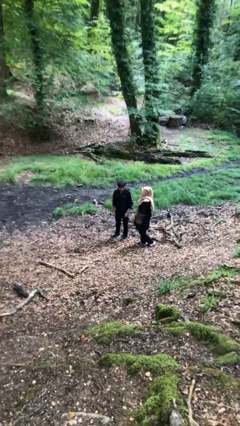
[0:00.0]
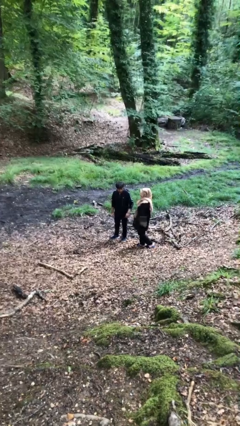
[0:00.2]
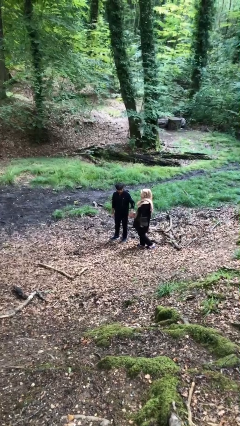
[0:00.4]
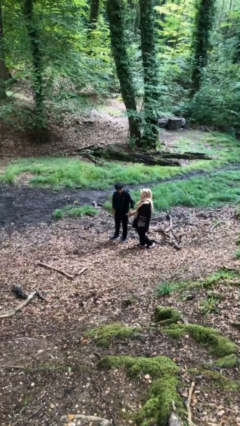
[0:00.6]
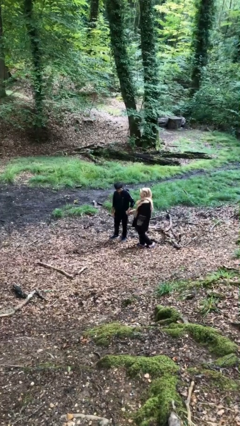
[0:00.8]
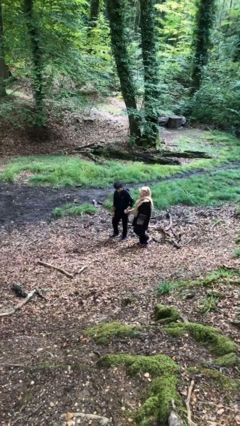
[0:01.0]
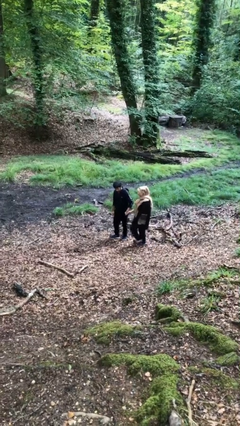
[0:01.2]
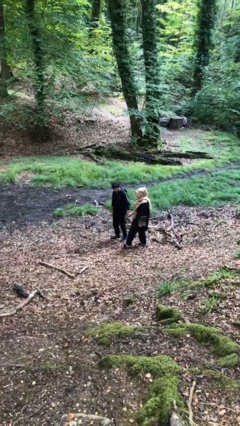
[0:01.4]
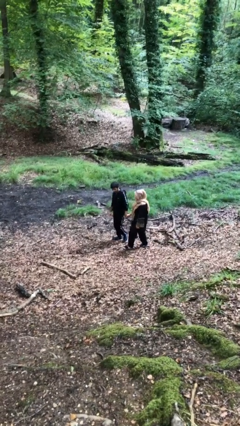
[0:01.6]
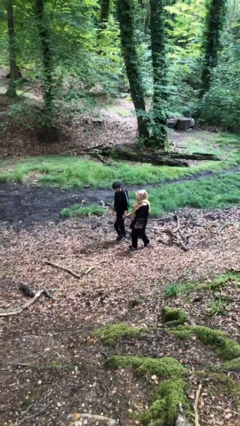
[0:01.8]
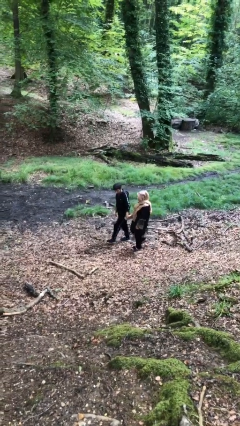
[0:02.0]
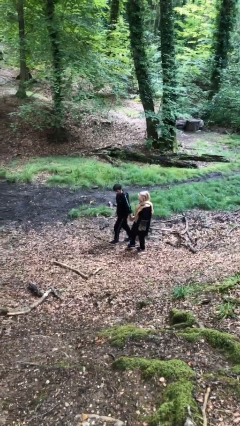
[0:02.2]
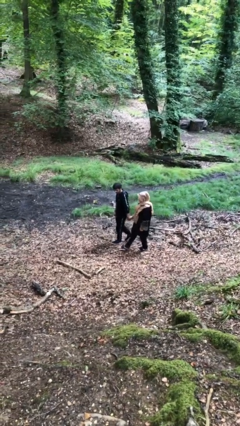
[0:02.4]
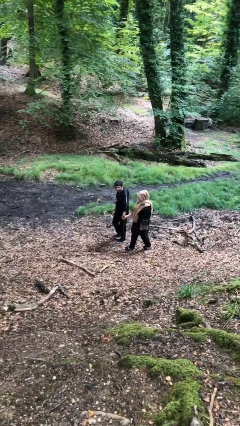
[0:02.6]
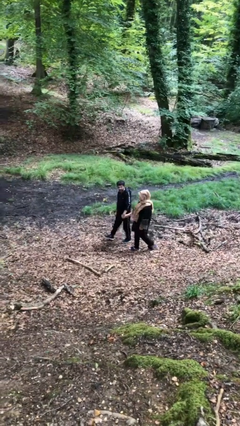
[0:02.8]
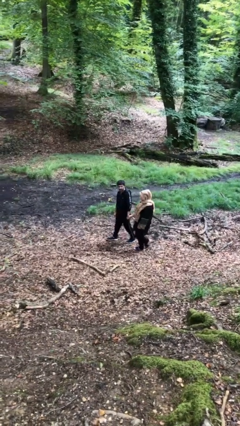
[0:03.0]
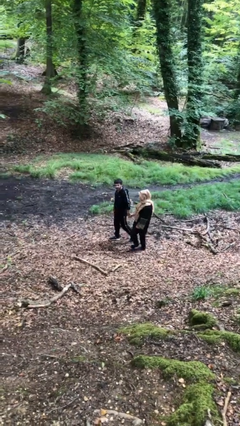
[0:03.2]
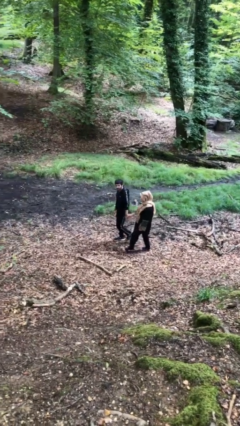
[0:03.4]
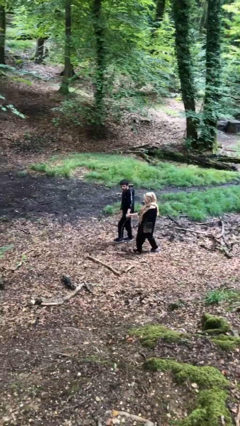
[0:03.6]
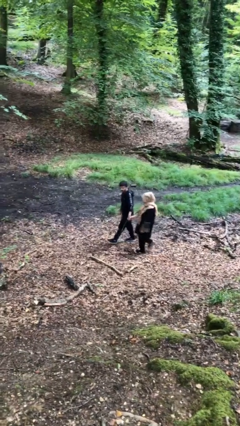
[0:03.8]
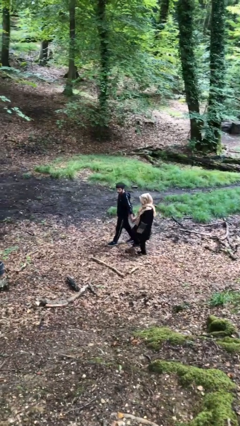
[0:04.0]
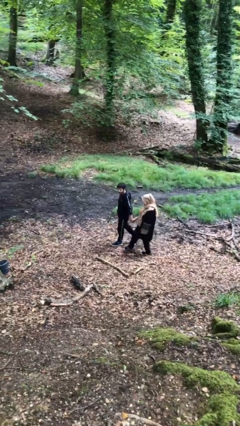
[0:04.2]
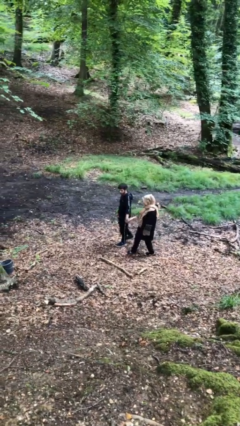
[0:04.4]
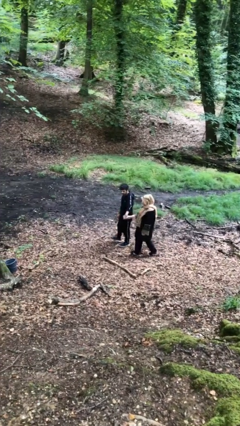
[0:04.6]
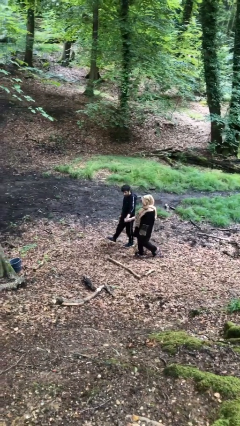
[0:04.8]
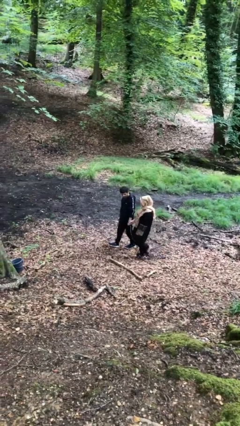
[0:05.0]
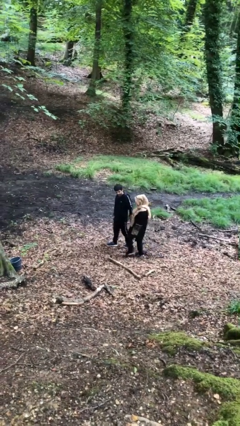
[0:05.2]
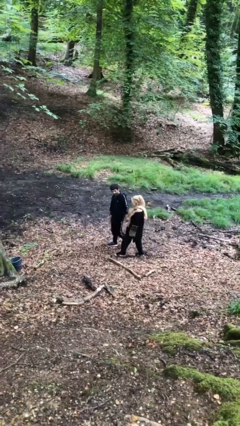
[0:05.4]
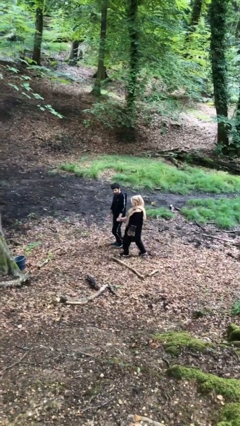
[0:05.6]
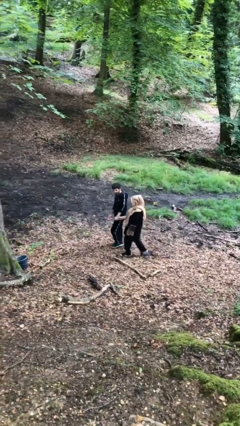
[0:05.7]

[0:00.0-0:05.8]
person holds hand

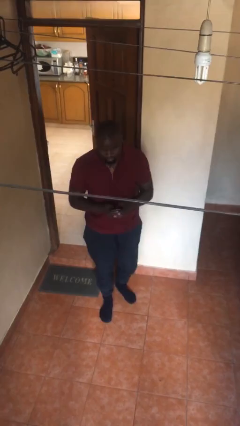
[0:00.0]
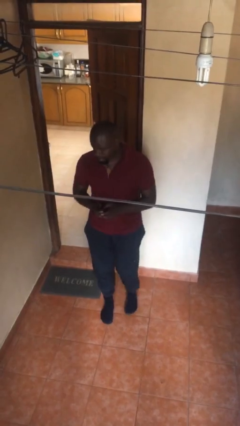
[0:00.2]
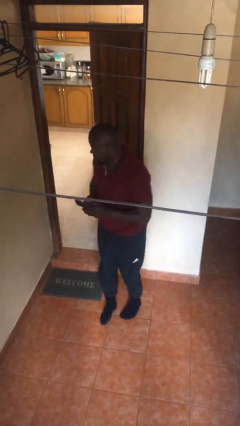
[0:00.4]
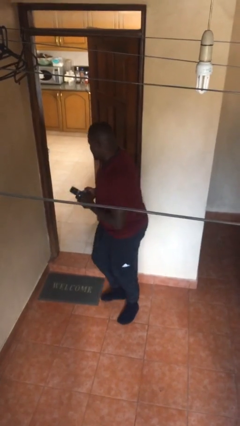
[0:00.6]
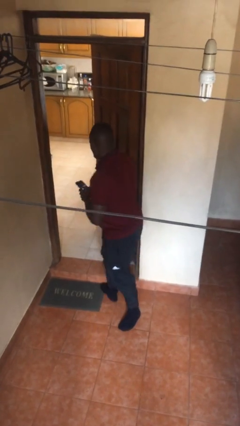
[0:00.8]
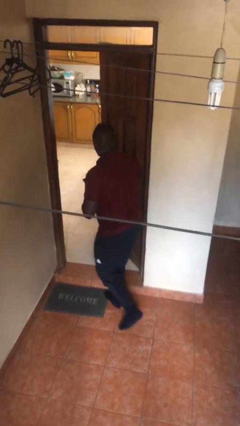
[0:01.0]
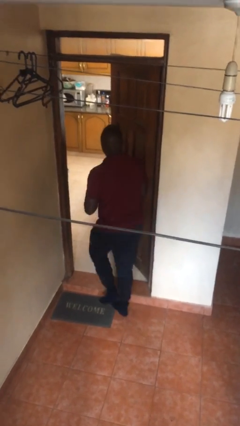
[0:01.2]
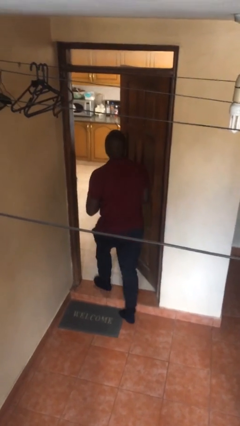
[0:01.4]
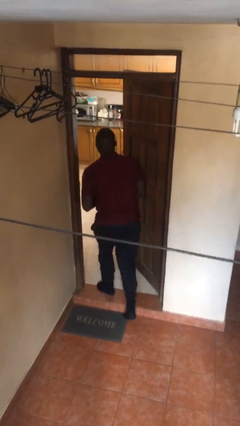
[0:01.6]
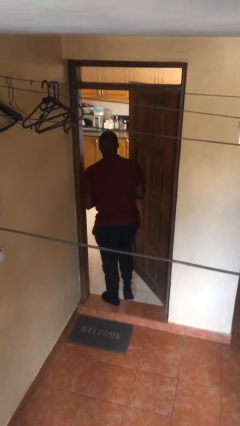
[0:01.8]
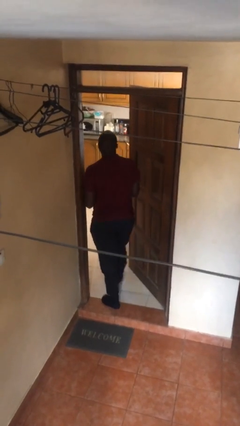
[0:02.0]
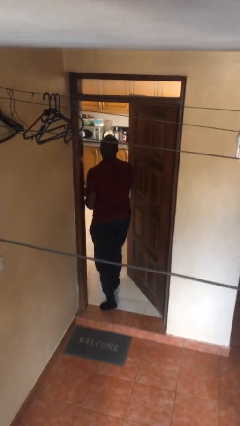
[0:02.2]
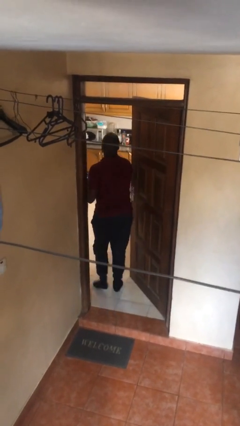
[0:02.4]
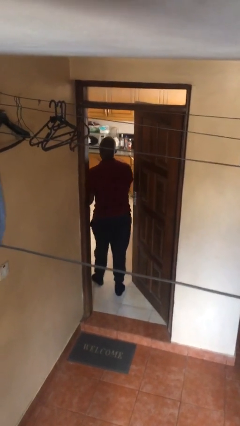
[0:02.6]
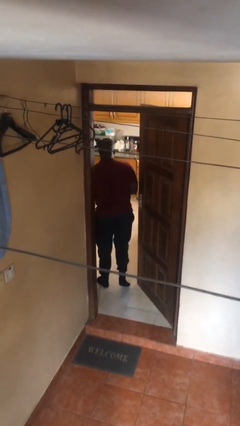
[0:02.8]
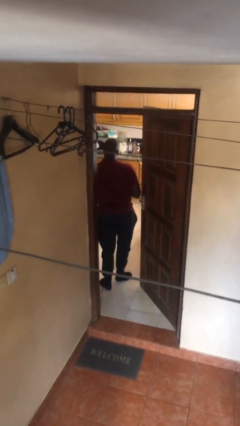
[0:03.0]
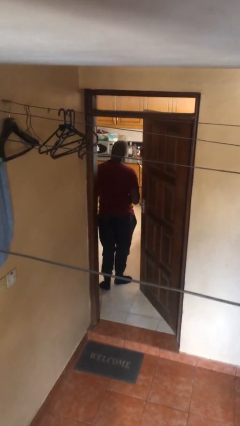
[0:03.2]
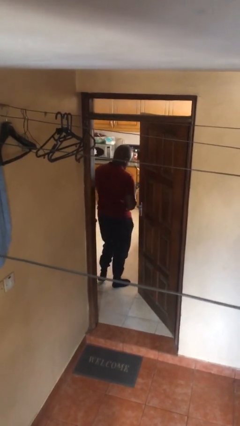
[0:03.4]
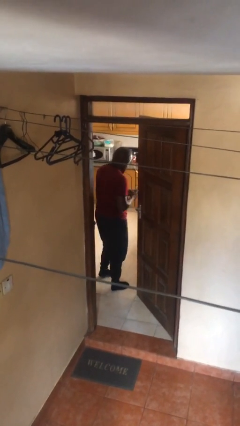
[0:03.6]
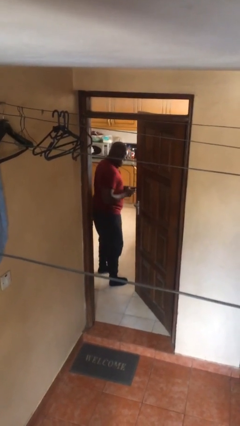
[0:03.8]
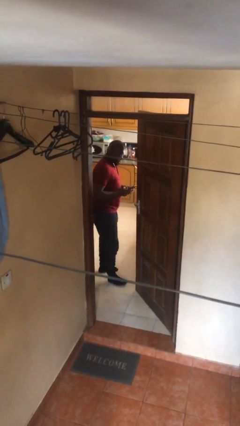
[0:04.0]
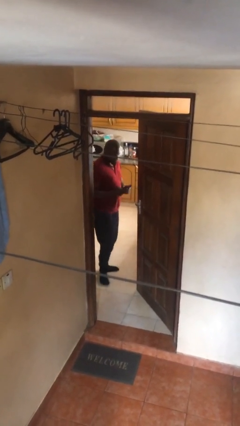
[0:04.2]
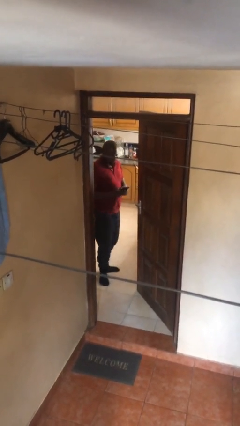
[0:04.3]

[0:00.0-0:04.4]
person exits scene through structure

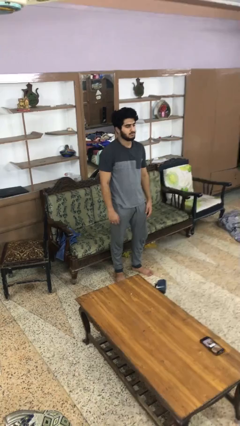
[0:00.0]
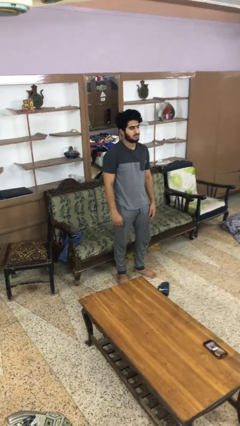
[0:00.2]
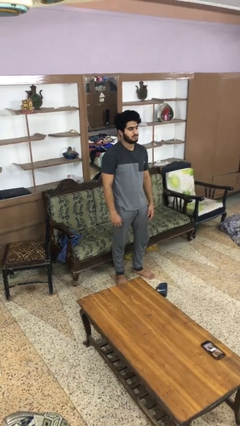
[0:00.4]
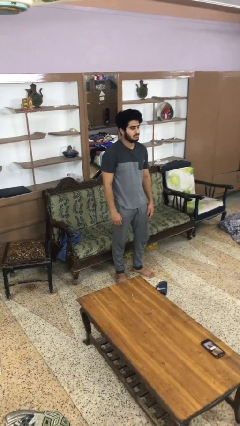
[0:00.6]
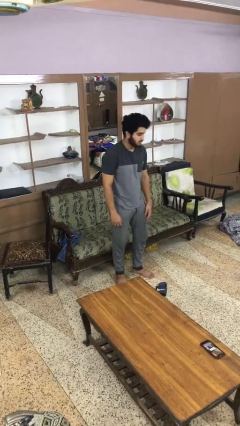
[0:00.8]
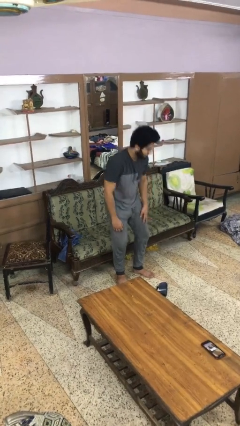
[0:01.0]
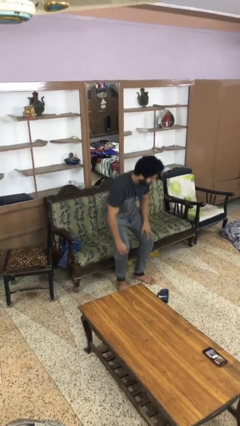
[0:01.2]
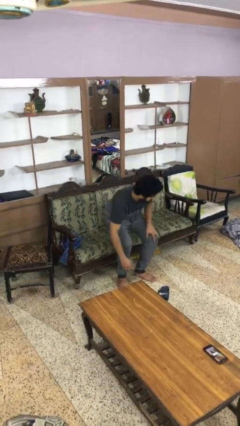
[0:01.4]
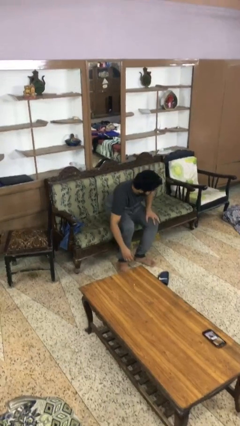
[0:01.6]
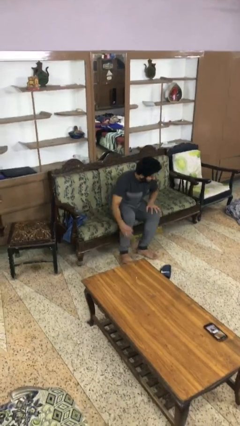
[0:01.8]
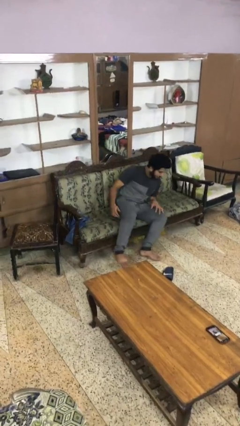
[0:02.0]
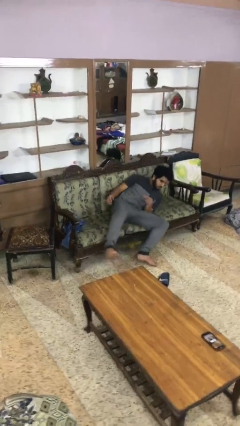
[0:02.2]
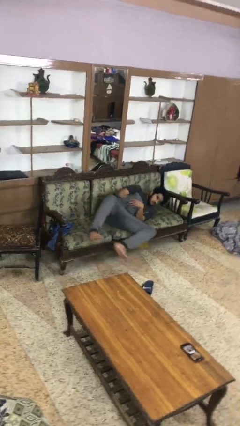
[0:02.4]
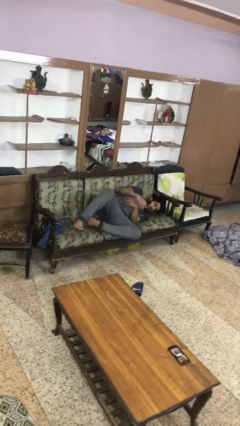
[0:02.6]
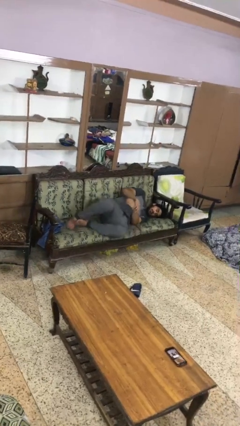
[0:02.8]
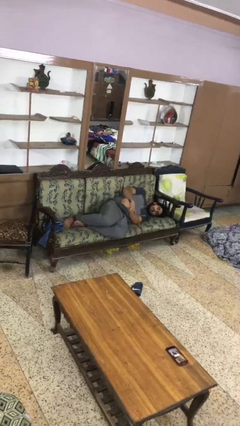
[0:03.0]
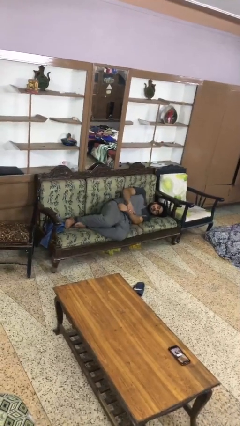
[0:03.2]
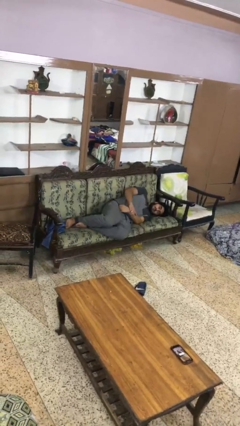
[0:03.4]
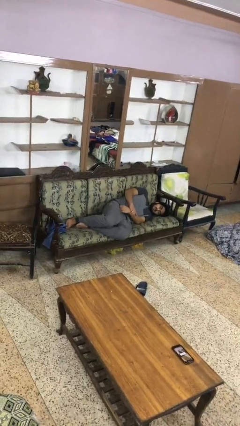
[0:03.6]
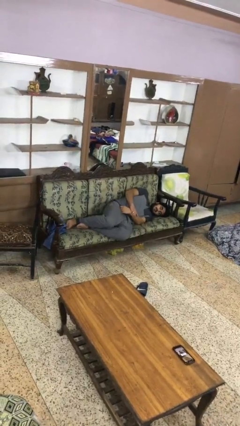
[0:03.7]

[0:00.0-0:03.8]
person lies down on couch

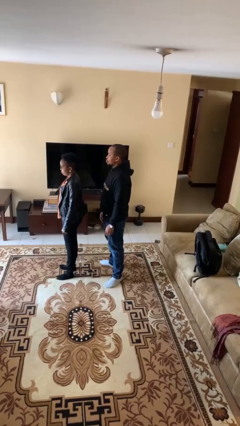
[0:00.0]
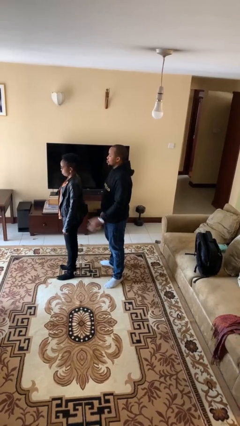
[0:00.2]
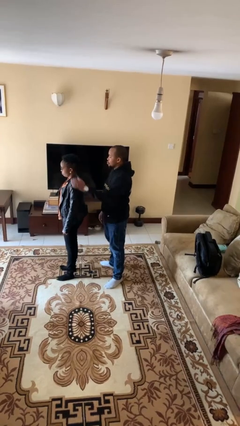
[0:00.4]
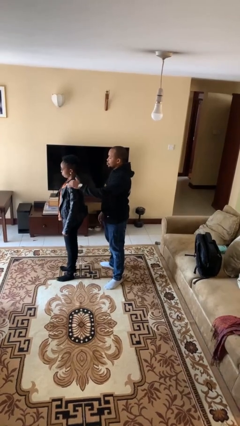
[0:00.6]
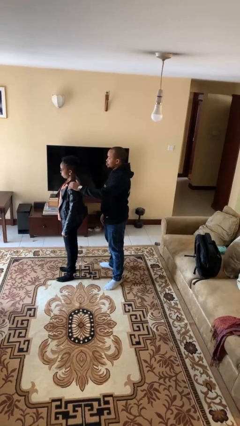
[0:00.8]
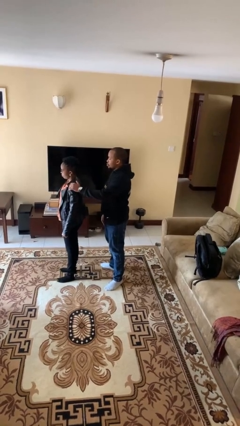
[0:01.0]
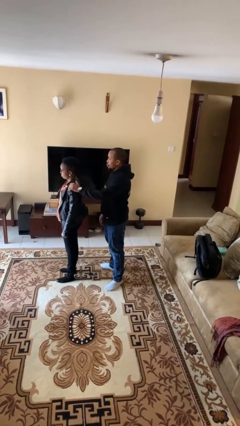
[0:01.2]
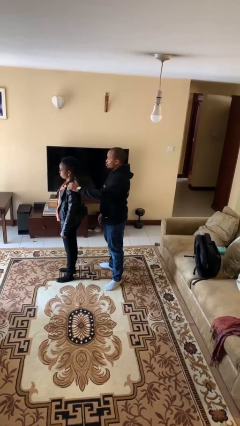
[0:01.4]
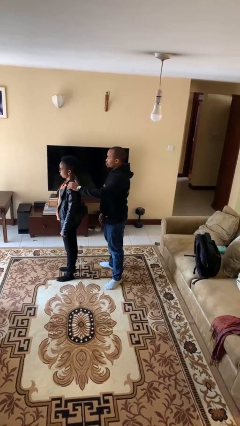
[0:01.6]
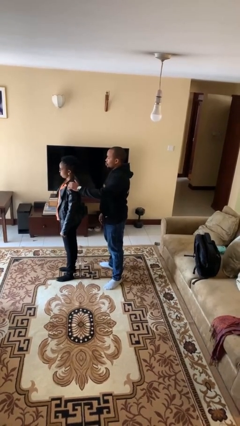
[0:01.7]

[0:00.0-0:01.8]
person grabs person by shoulder

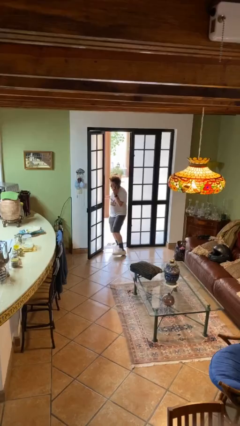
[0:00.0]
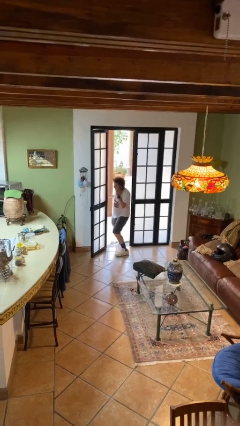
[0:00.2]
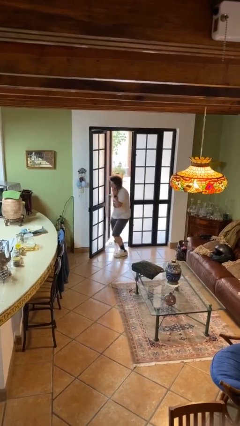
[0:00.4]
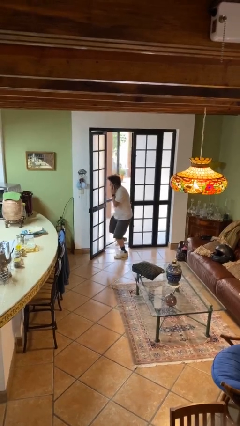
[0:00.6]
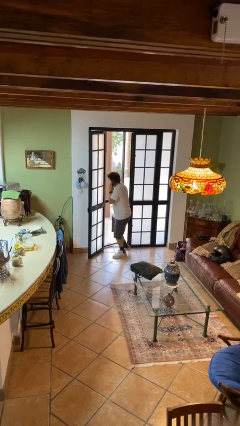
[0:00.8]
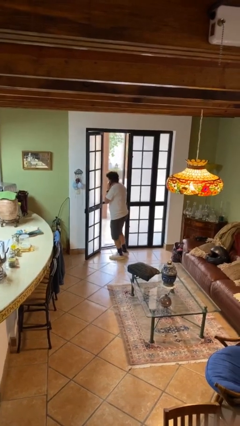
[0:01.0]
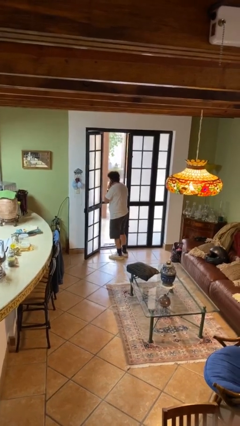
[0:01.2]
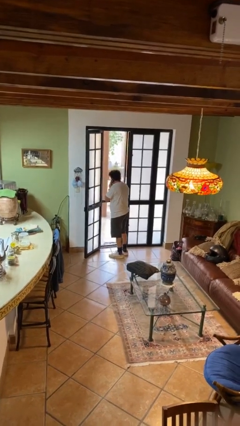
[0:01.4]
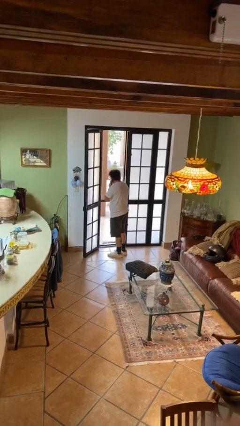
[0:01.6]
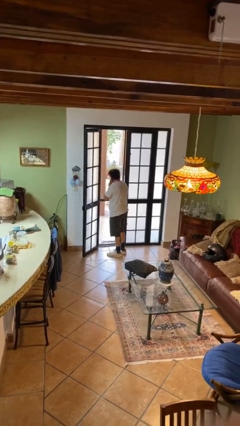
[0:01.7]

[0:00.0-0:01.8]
person enters scene through structure
